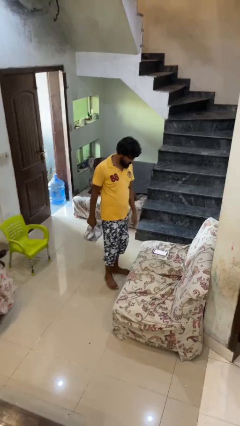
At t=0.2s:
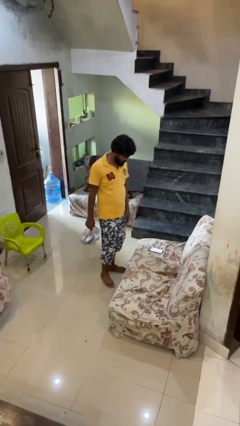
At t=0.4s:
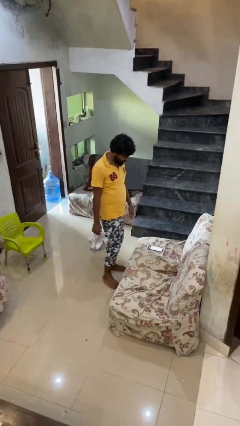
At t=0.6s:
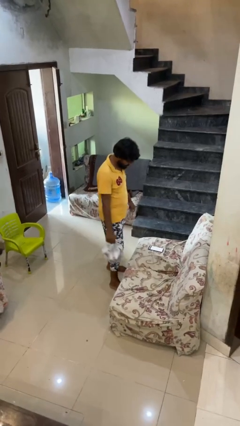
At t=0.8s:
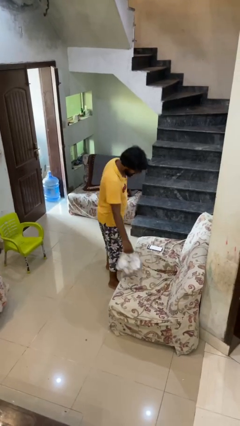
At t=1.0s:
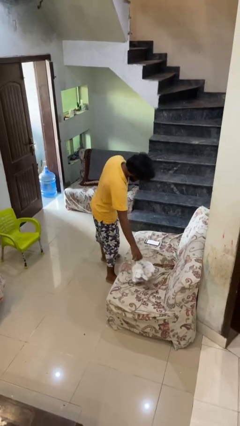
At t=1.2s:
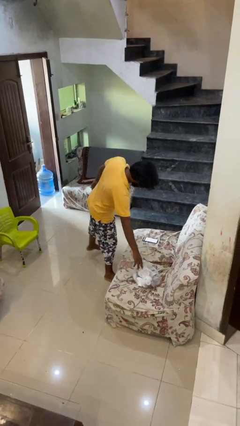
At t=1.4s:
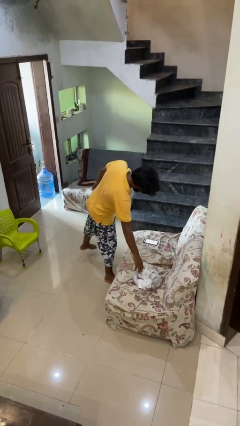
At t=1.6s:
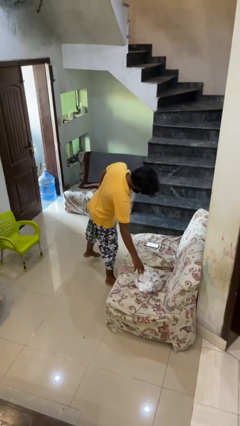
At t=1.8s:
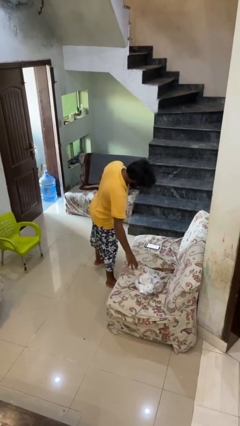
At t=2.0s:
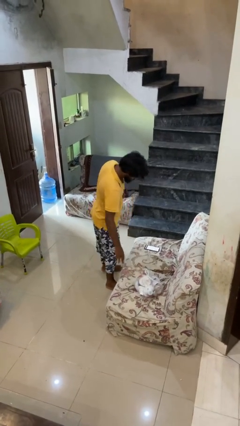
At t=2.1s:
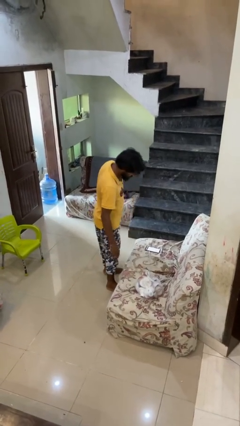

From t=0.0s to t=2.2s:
person puts down object on couch

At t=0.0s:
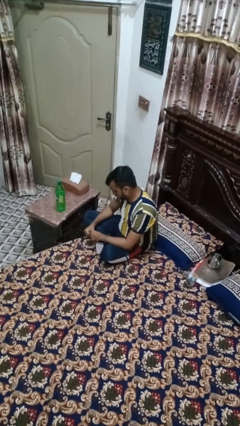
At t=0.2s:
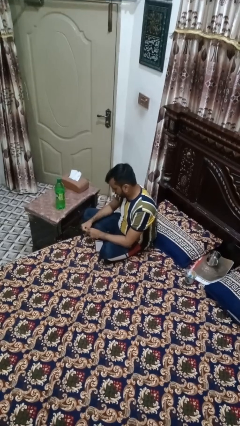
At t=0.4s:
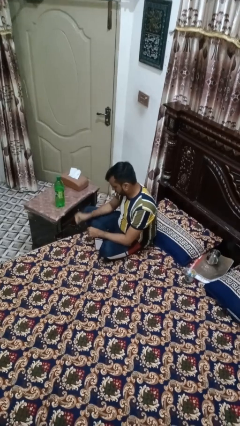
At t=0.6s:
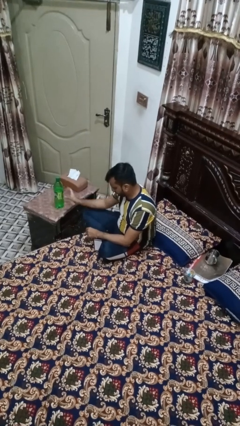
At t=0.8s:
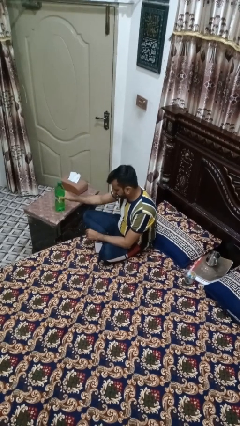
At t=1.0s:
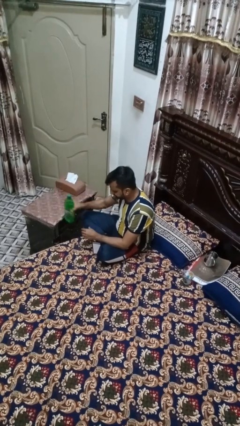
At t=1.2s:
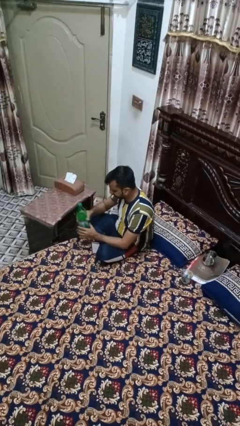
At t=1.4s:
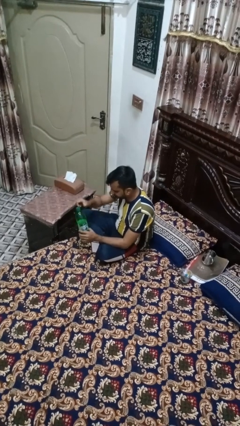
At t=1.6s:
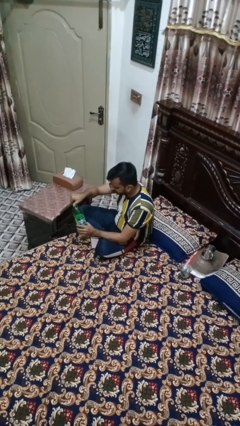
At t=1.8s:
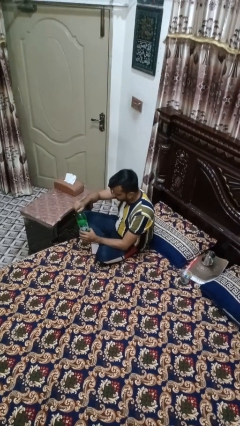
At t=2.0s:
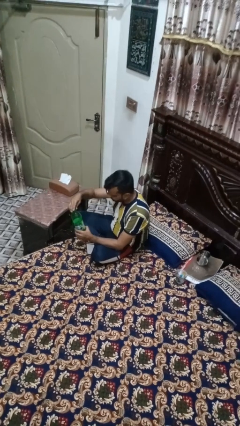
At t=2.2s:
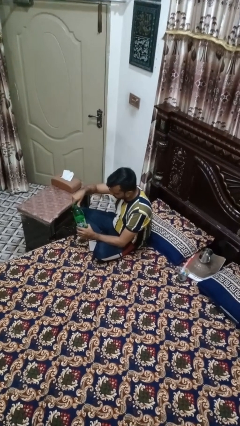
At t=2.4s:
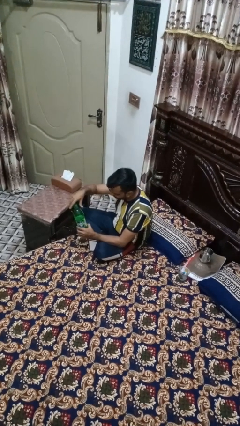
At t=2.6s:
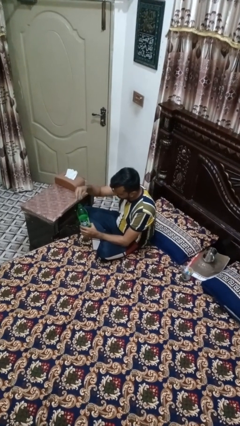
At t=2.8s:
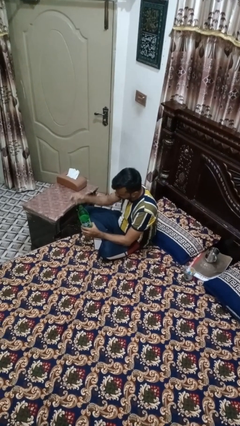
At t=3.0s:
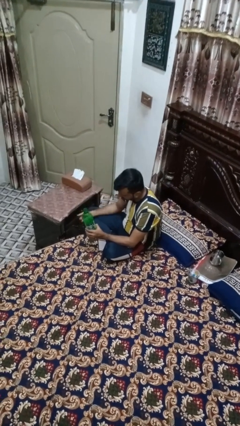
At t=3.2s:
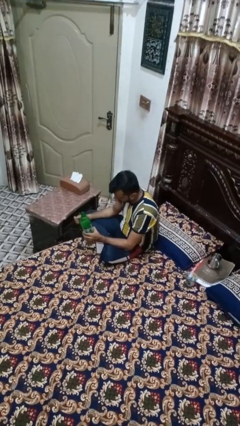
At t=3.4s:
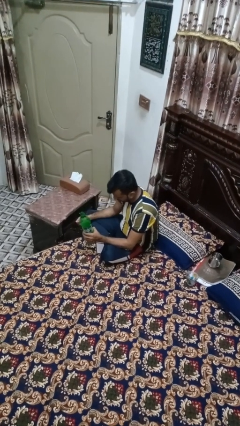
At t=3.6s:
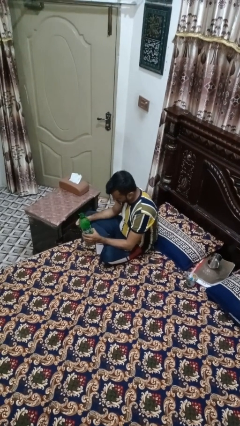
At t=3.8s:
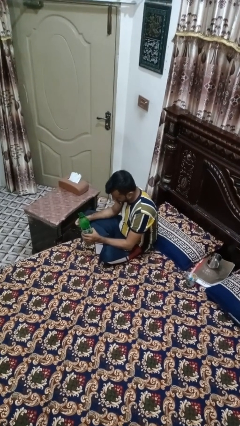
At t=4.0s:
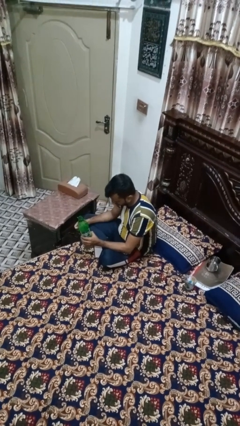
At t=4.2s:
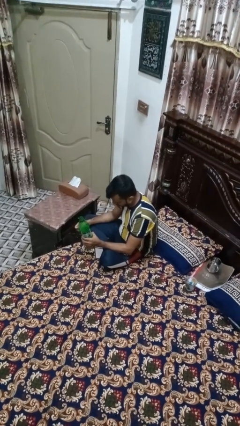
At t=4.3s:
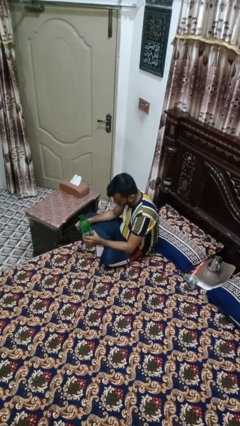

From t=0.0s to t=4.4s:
person unscrews lid from bottle

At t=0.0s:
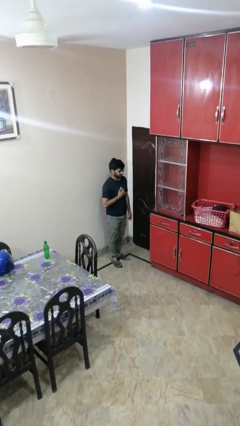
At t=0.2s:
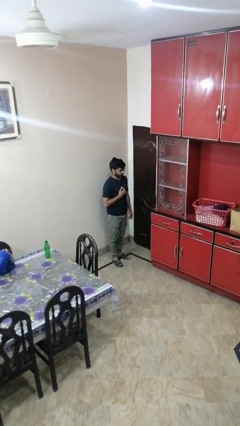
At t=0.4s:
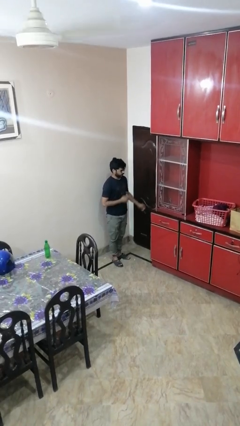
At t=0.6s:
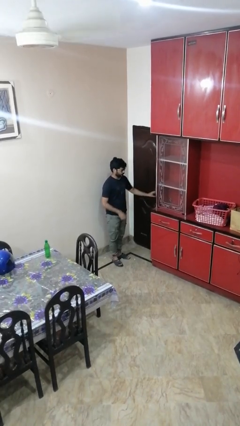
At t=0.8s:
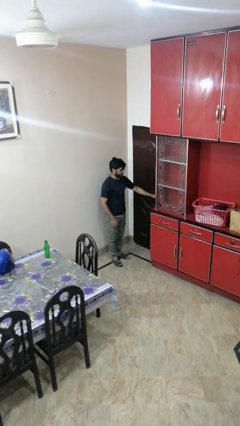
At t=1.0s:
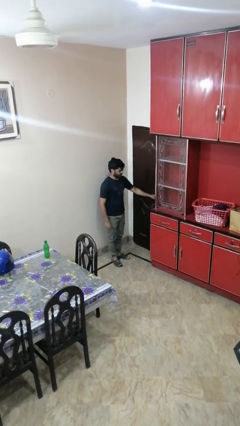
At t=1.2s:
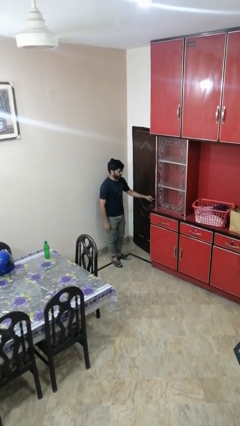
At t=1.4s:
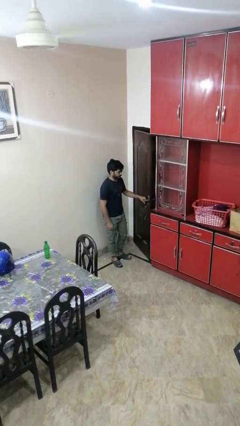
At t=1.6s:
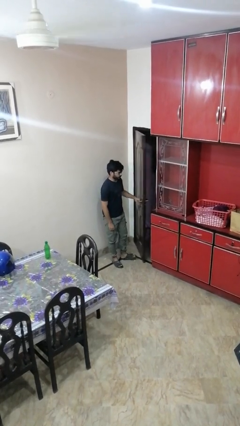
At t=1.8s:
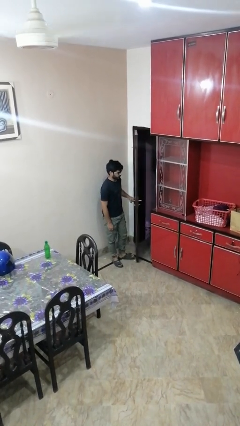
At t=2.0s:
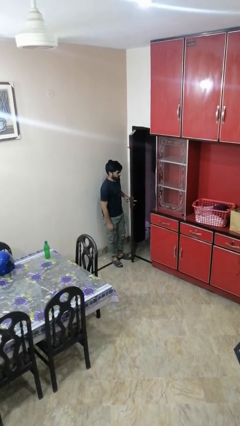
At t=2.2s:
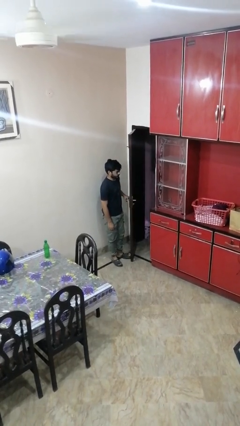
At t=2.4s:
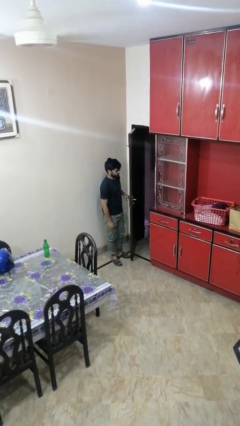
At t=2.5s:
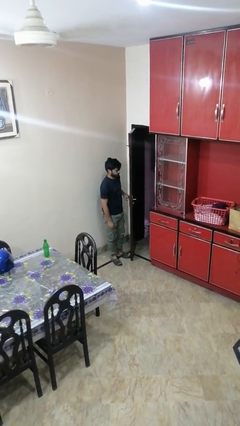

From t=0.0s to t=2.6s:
person opens facility door

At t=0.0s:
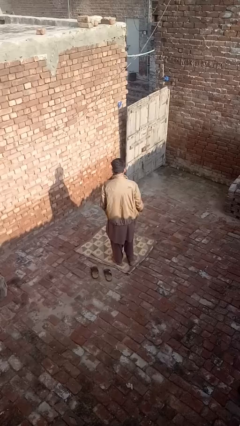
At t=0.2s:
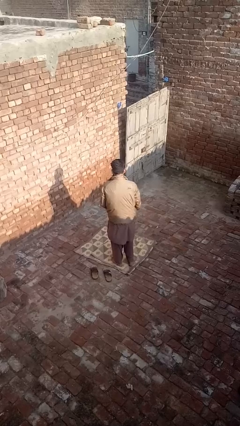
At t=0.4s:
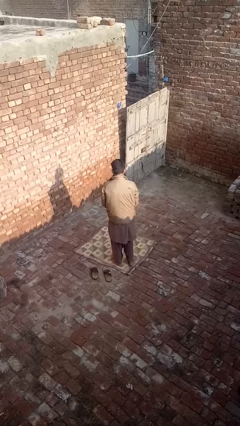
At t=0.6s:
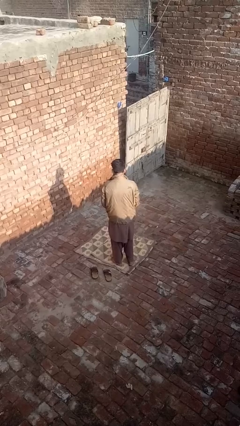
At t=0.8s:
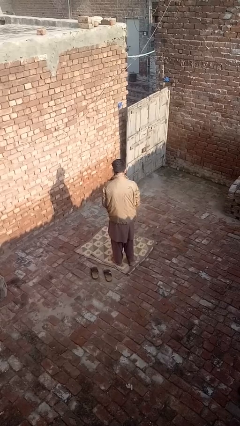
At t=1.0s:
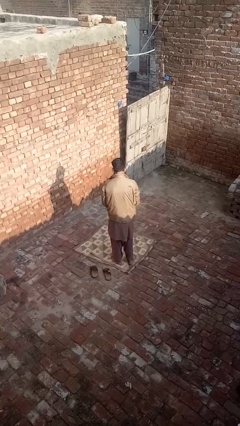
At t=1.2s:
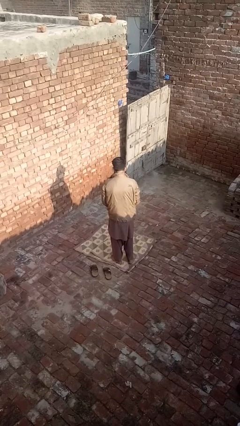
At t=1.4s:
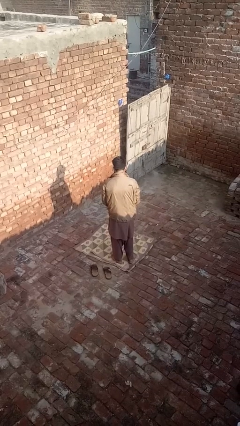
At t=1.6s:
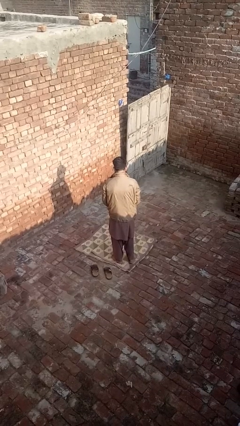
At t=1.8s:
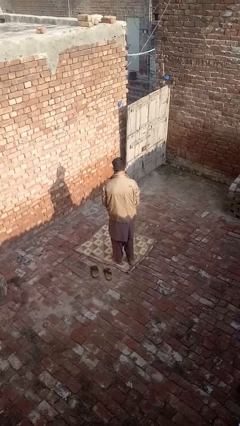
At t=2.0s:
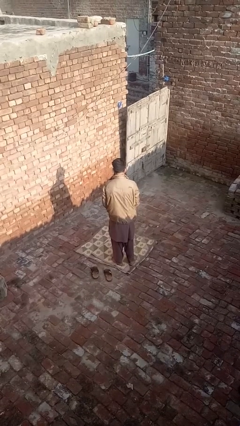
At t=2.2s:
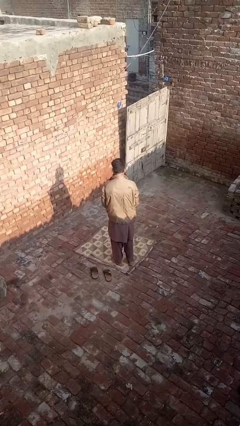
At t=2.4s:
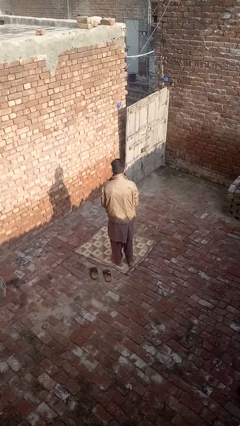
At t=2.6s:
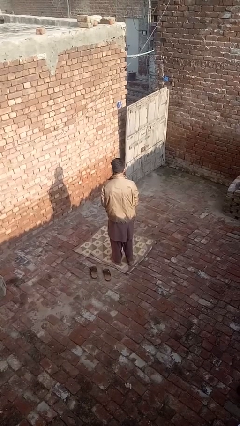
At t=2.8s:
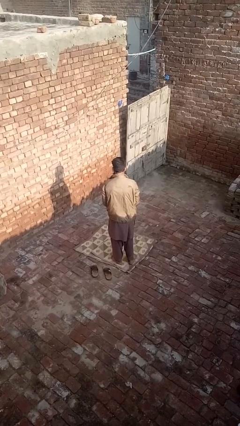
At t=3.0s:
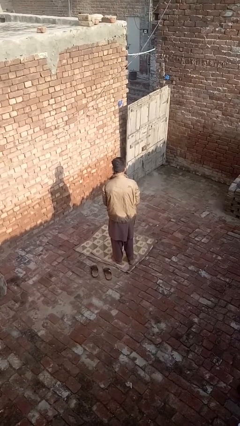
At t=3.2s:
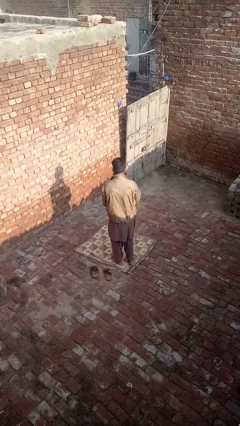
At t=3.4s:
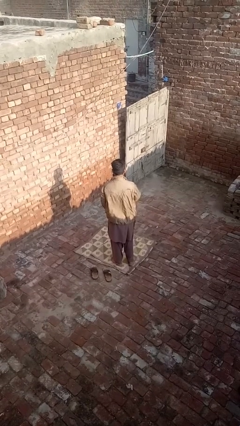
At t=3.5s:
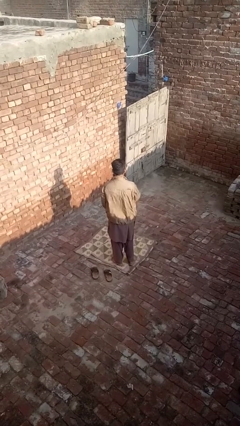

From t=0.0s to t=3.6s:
person zips up jacket

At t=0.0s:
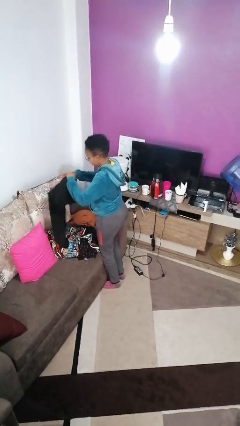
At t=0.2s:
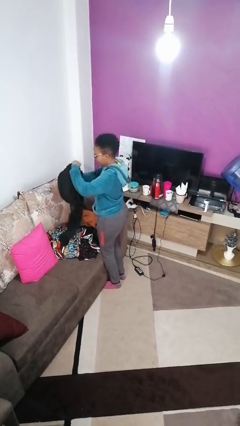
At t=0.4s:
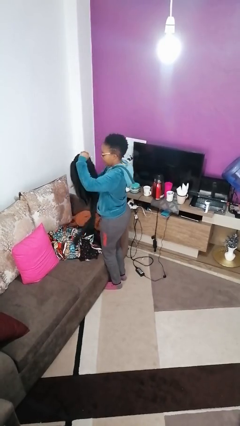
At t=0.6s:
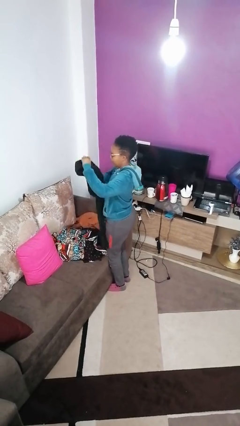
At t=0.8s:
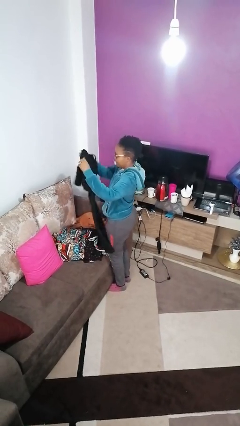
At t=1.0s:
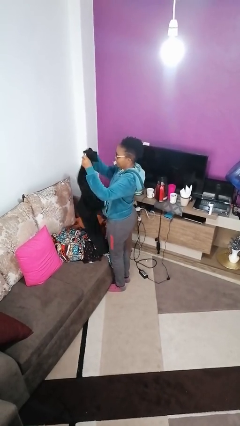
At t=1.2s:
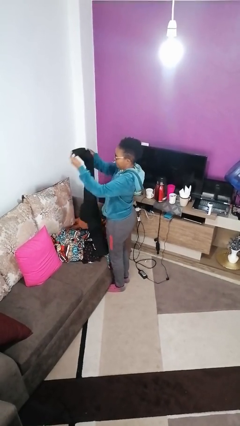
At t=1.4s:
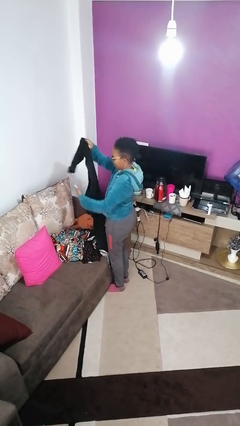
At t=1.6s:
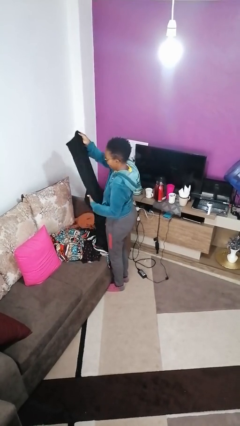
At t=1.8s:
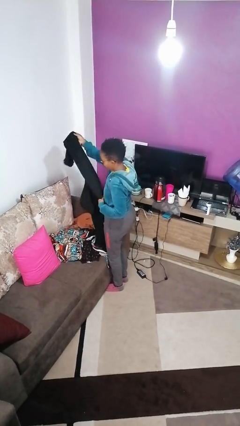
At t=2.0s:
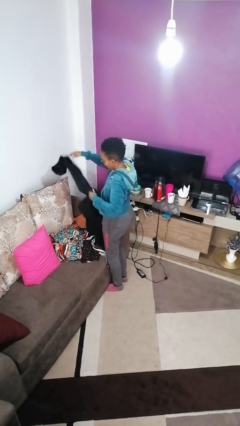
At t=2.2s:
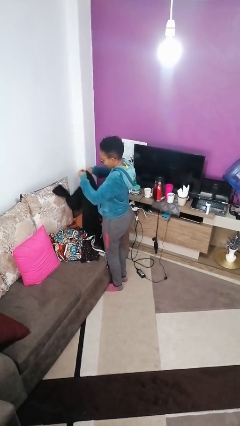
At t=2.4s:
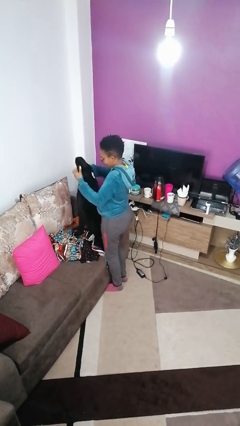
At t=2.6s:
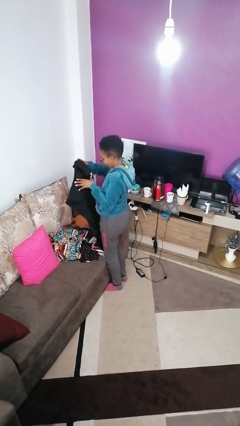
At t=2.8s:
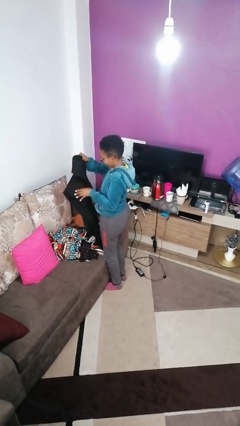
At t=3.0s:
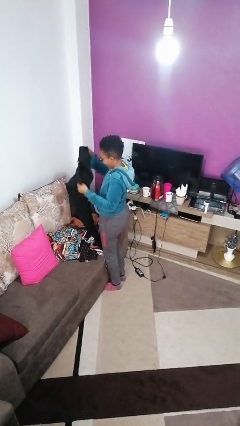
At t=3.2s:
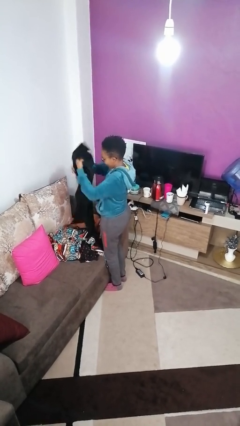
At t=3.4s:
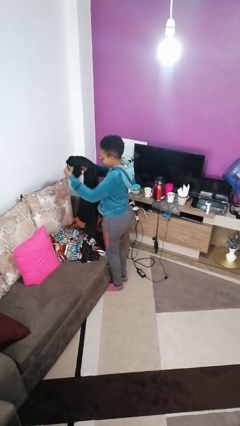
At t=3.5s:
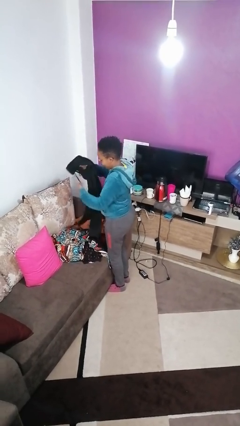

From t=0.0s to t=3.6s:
person folds pants

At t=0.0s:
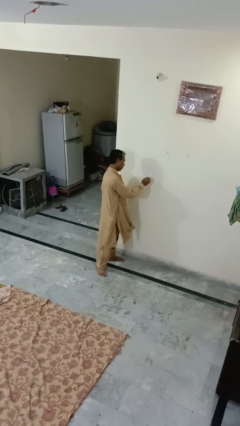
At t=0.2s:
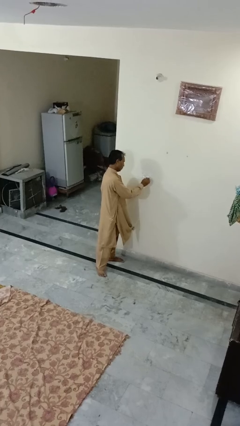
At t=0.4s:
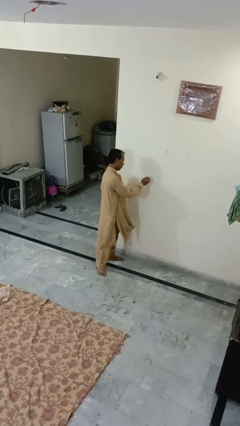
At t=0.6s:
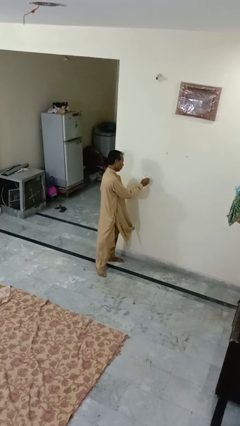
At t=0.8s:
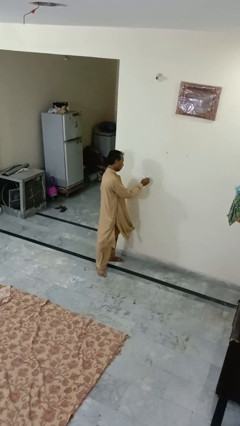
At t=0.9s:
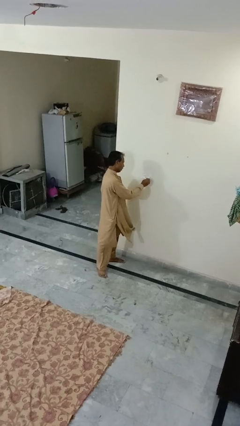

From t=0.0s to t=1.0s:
person unplugs from electrical socket
